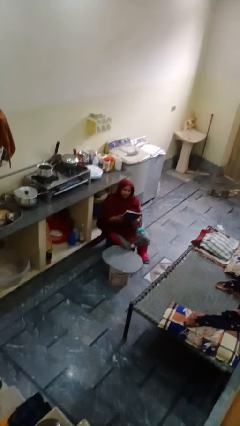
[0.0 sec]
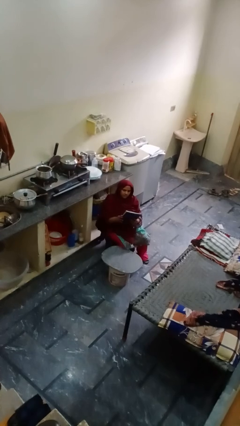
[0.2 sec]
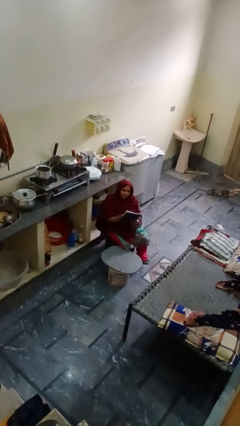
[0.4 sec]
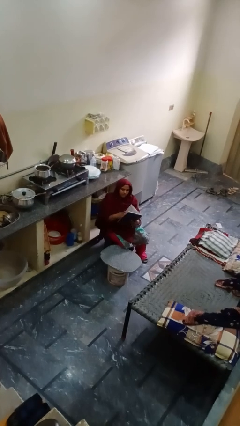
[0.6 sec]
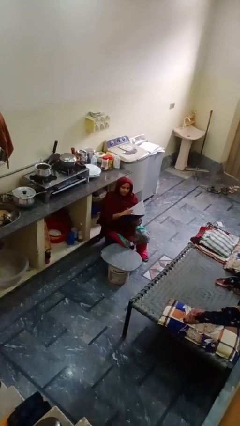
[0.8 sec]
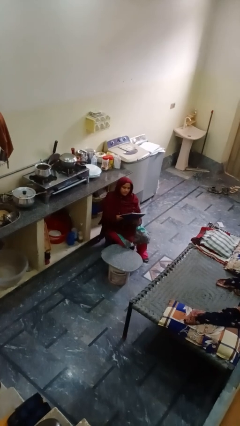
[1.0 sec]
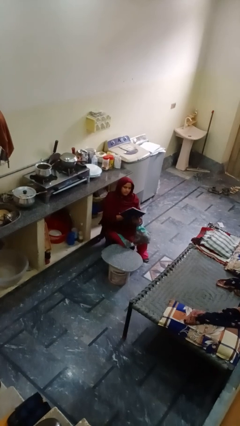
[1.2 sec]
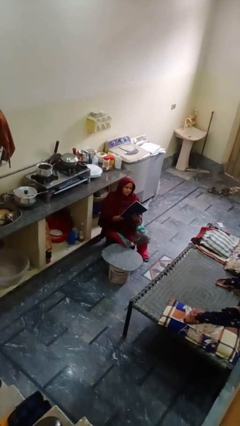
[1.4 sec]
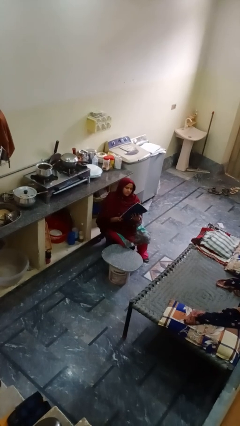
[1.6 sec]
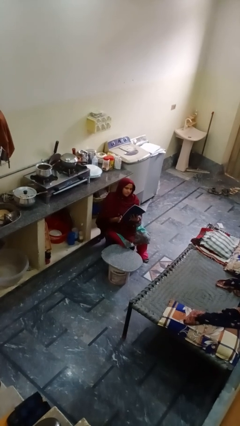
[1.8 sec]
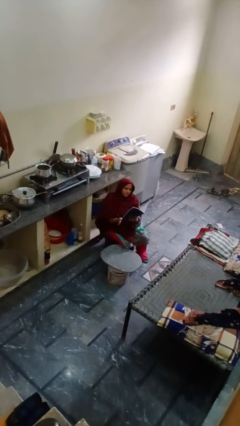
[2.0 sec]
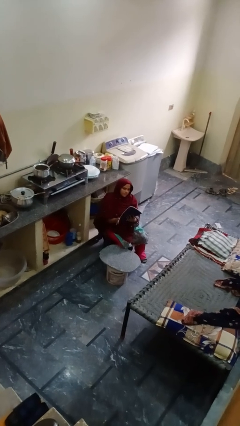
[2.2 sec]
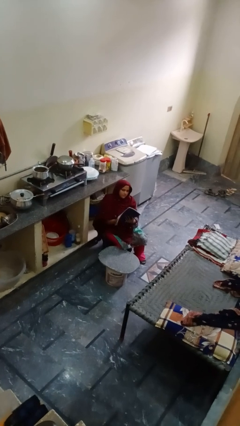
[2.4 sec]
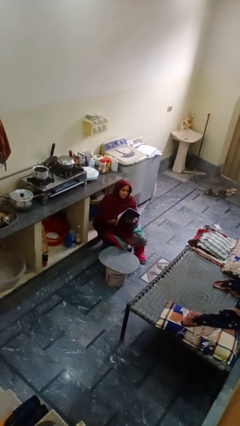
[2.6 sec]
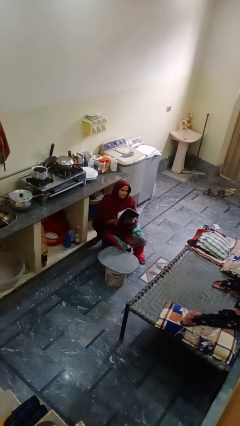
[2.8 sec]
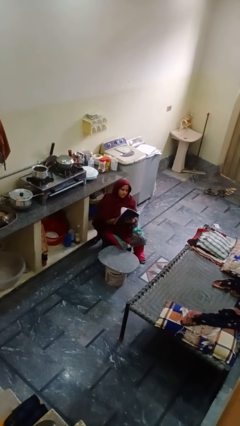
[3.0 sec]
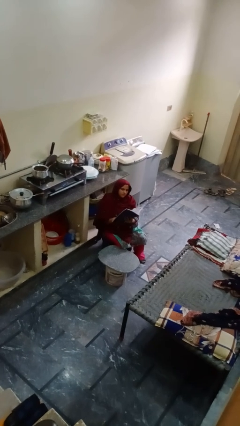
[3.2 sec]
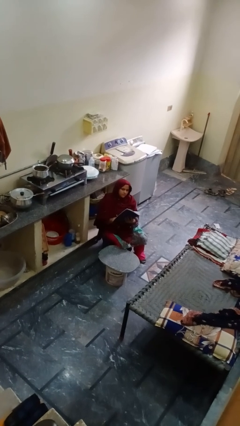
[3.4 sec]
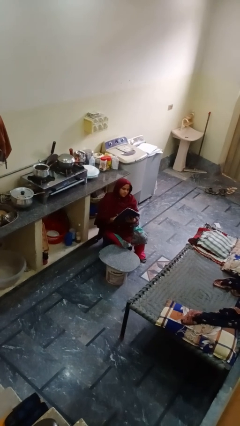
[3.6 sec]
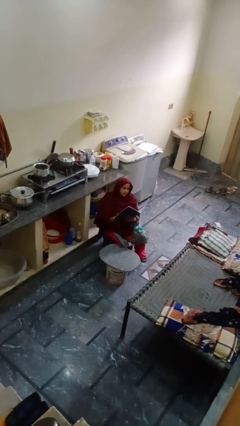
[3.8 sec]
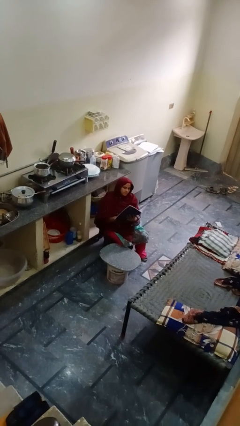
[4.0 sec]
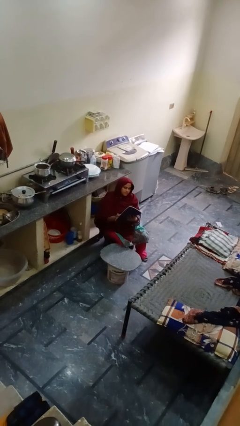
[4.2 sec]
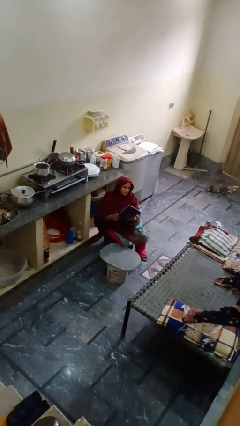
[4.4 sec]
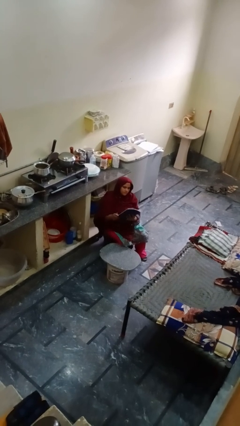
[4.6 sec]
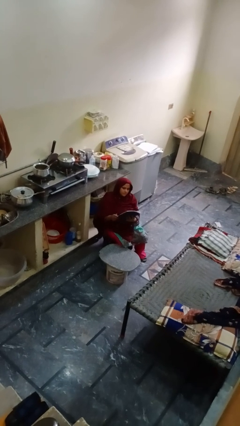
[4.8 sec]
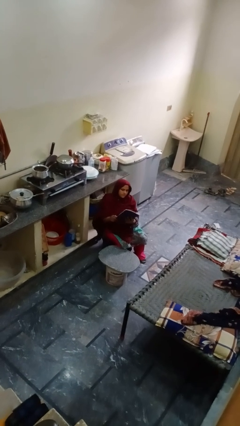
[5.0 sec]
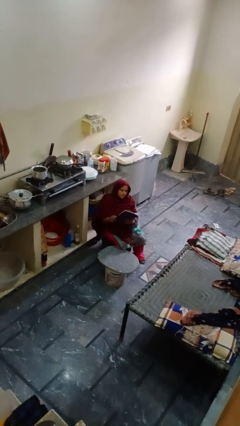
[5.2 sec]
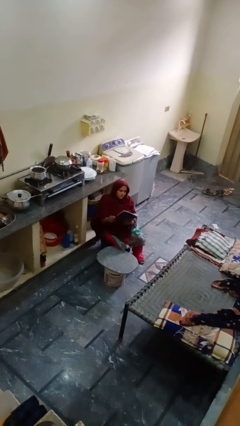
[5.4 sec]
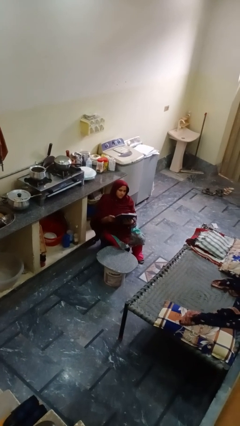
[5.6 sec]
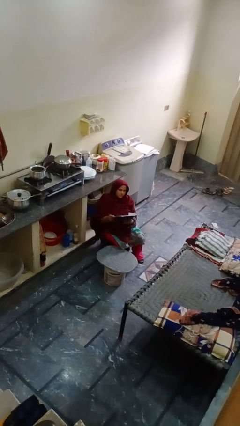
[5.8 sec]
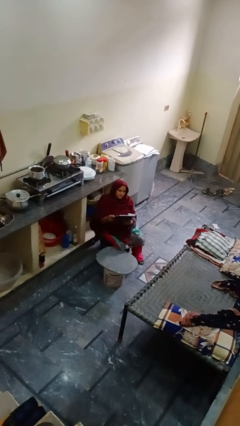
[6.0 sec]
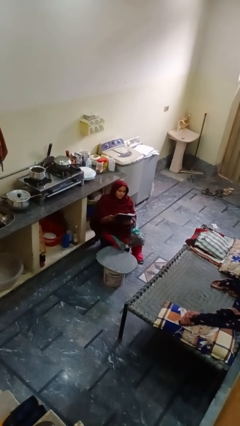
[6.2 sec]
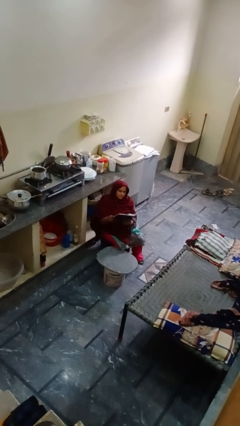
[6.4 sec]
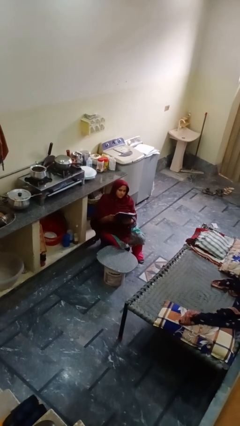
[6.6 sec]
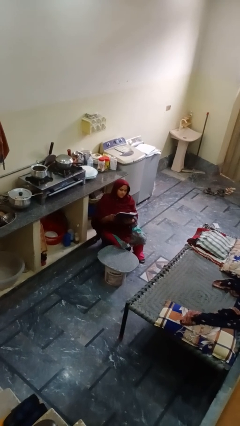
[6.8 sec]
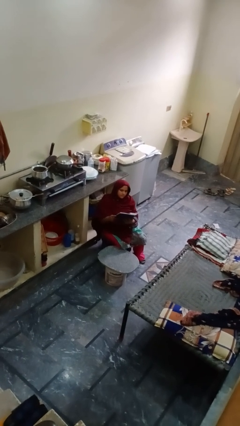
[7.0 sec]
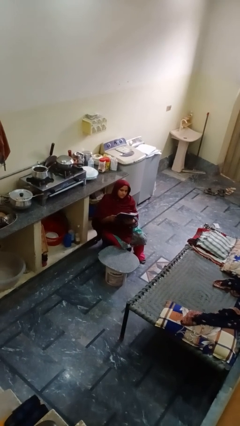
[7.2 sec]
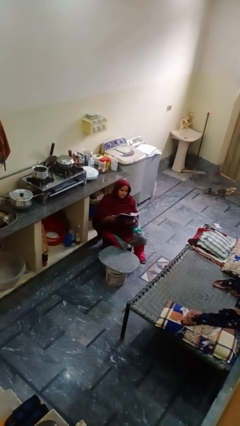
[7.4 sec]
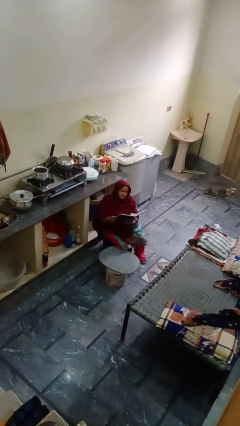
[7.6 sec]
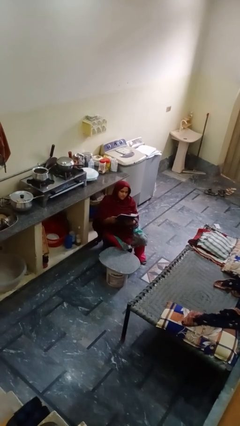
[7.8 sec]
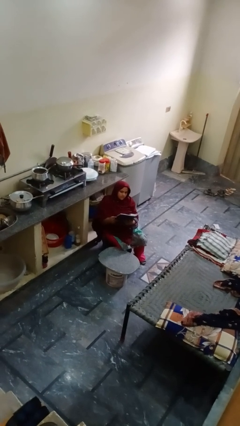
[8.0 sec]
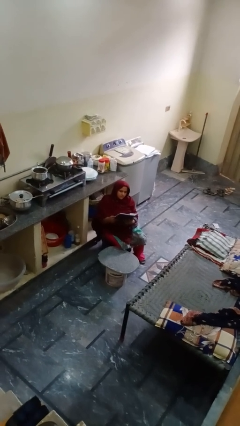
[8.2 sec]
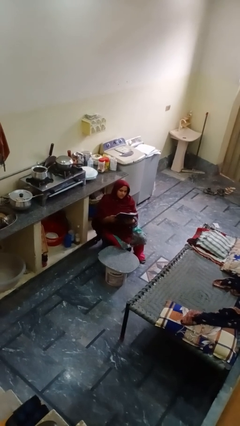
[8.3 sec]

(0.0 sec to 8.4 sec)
person reads magazine

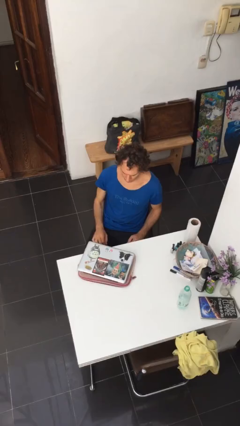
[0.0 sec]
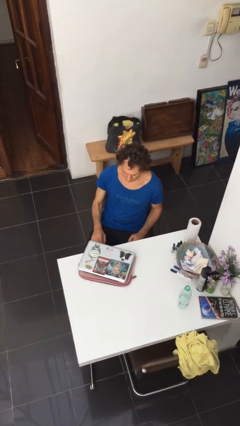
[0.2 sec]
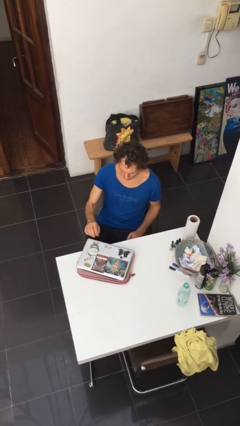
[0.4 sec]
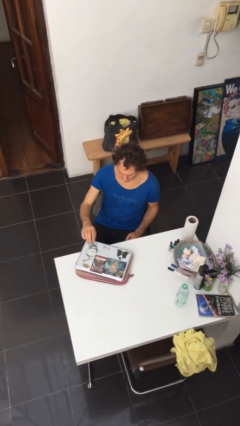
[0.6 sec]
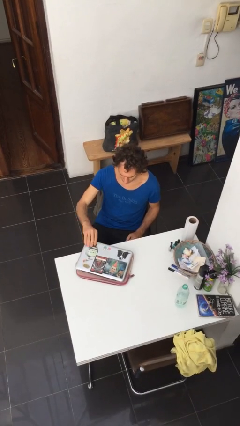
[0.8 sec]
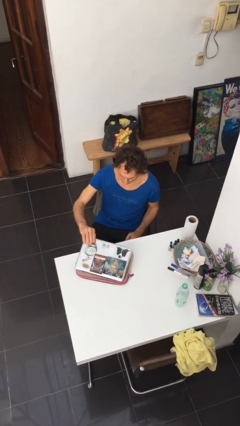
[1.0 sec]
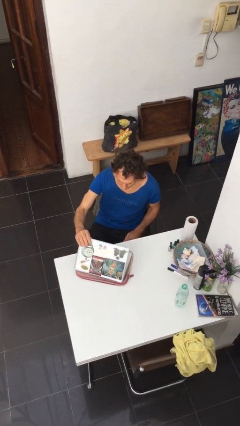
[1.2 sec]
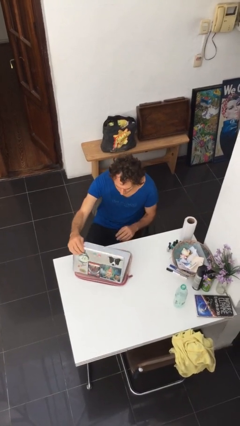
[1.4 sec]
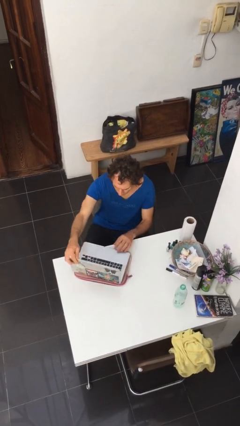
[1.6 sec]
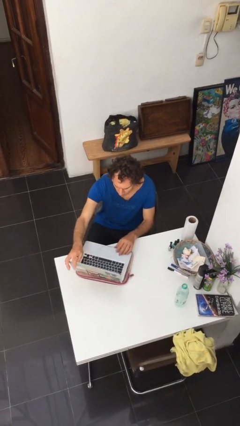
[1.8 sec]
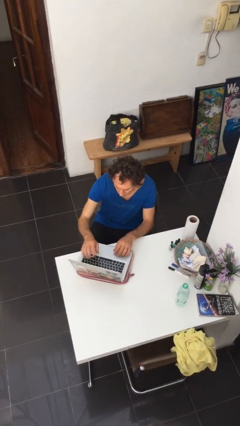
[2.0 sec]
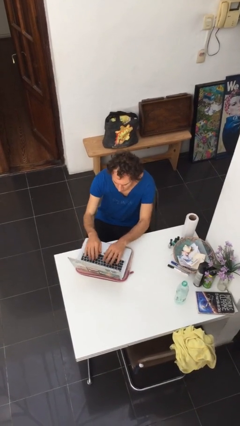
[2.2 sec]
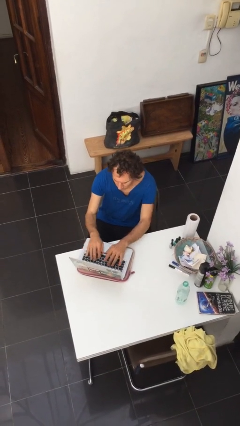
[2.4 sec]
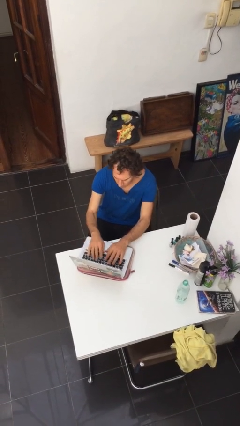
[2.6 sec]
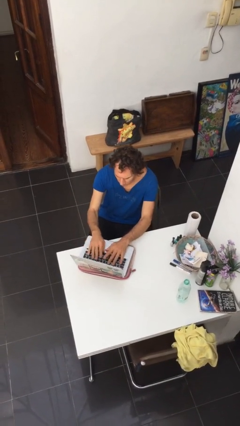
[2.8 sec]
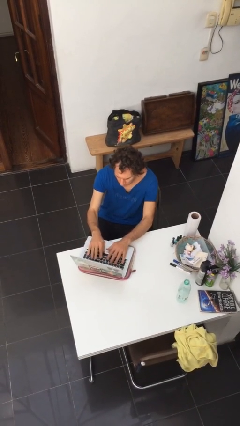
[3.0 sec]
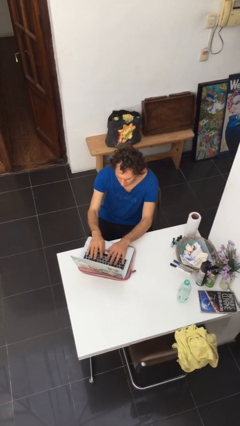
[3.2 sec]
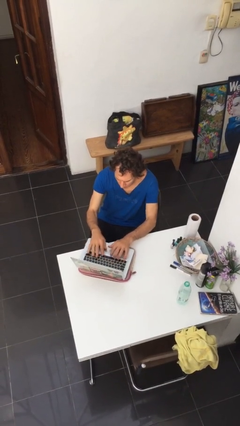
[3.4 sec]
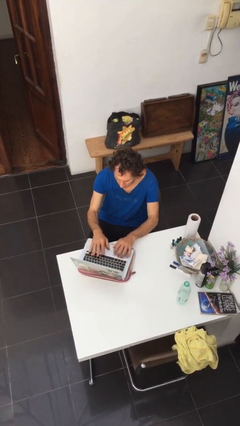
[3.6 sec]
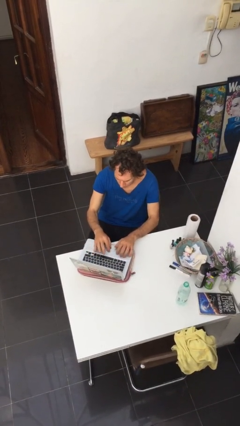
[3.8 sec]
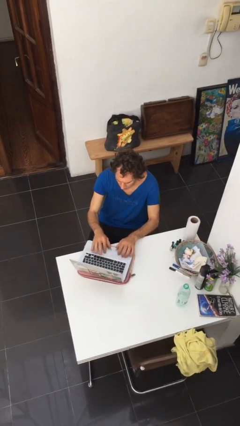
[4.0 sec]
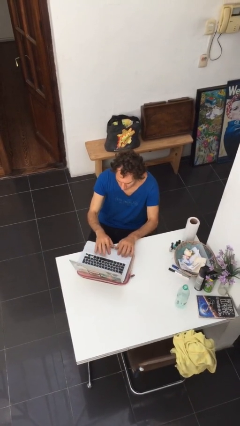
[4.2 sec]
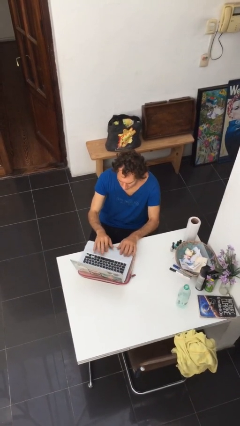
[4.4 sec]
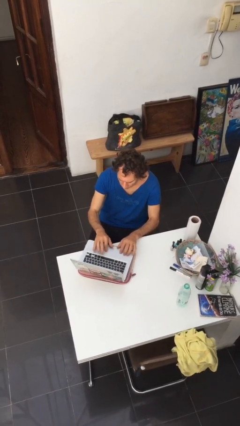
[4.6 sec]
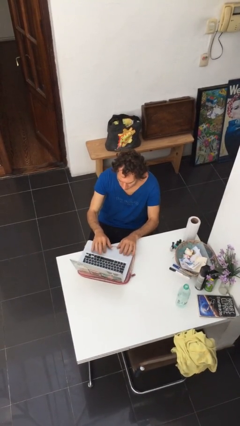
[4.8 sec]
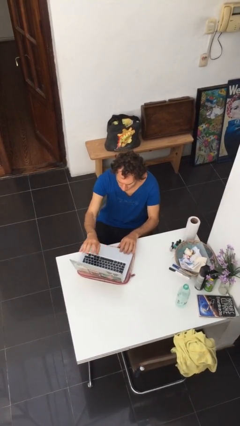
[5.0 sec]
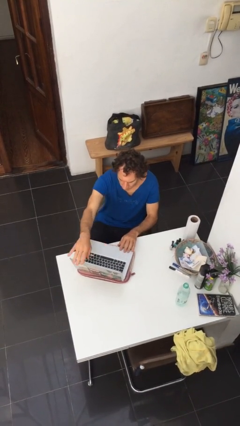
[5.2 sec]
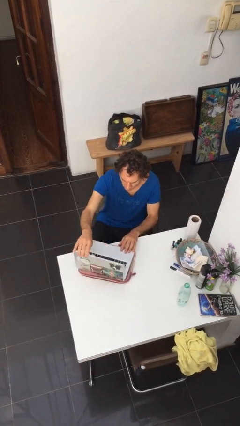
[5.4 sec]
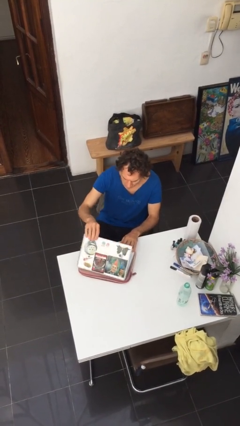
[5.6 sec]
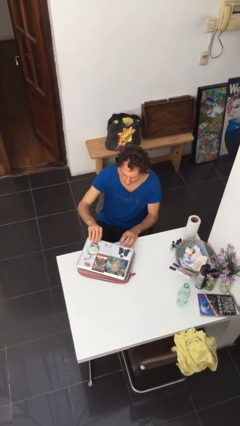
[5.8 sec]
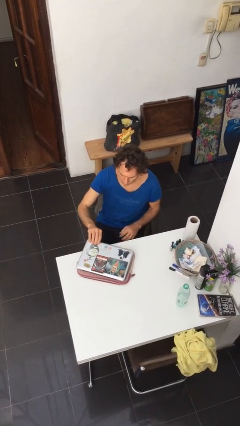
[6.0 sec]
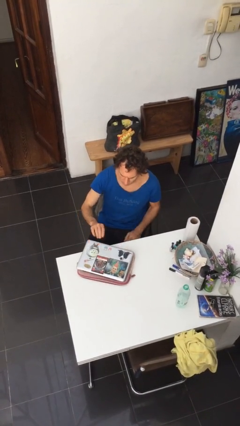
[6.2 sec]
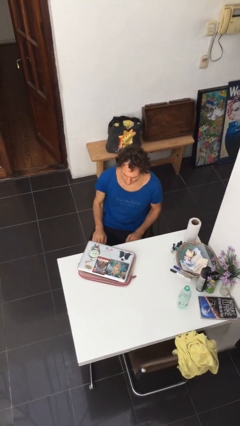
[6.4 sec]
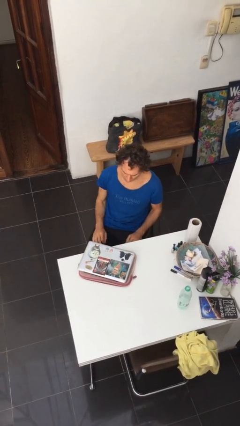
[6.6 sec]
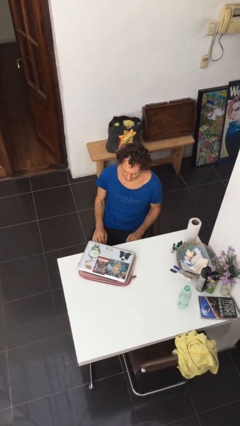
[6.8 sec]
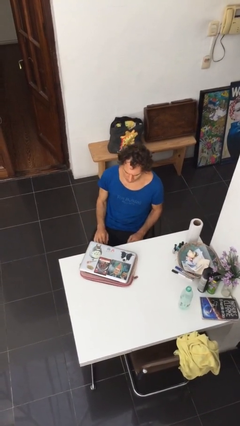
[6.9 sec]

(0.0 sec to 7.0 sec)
person interacts with laptop

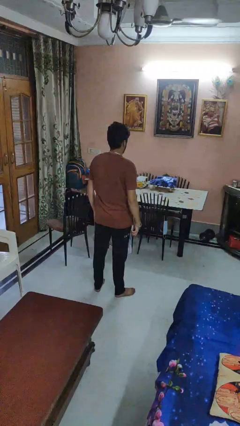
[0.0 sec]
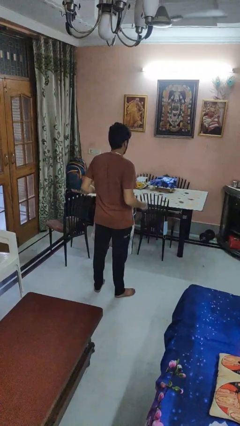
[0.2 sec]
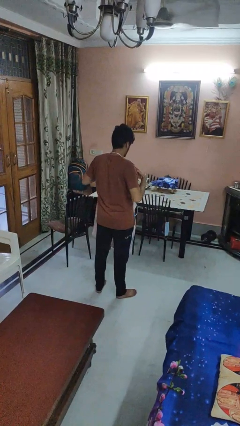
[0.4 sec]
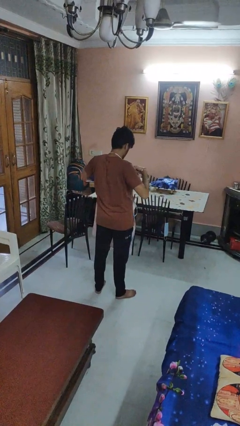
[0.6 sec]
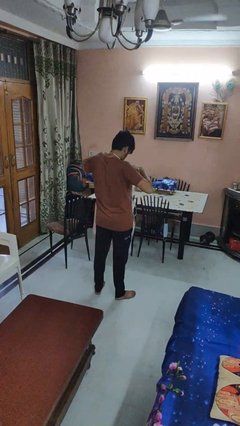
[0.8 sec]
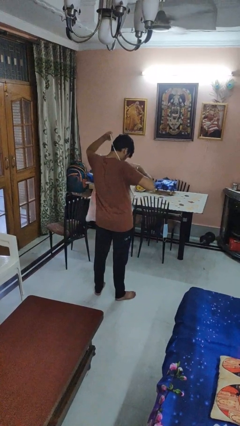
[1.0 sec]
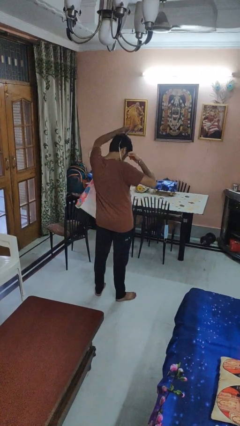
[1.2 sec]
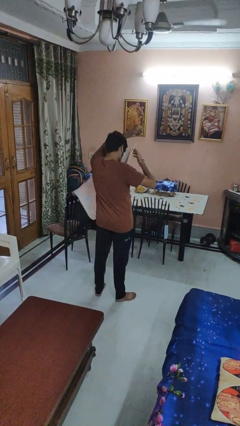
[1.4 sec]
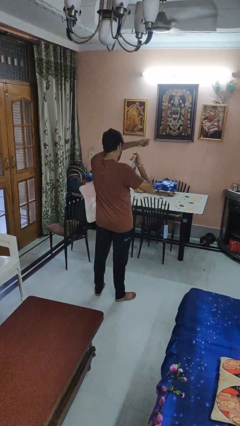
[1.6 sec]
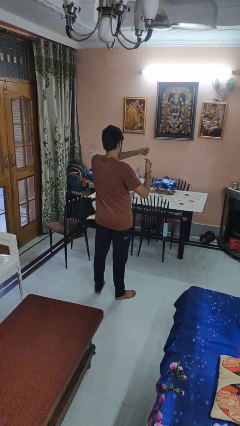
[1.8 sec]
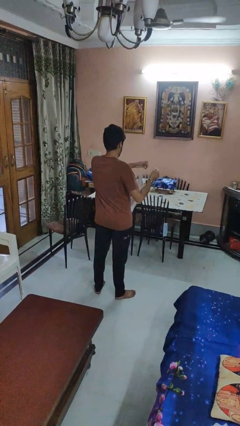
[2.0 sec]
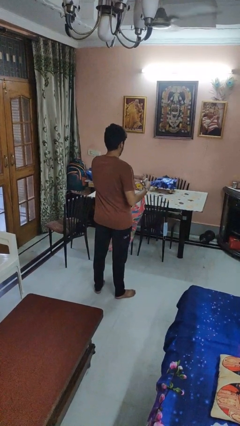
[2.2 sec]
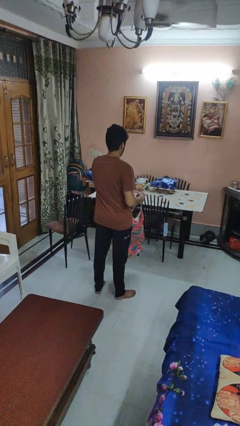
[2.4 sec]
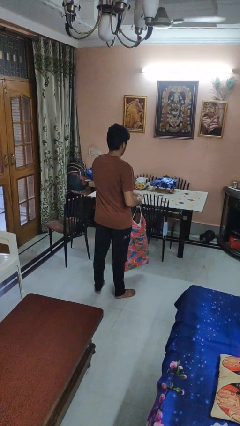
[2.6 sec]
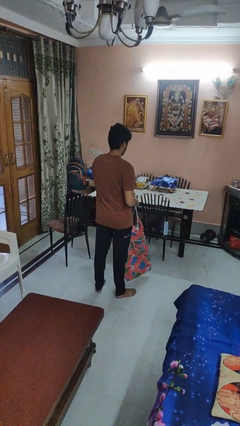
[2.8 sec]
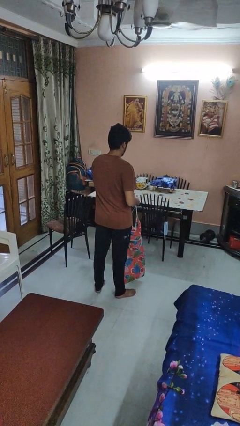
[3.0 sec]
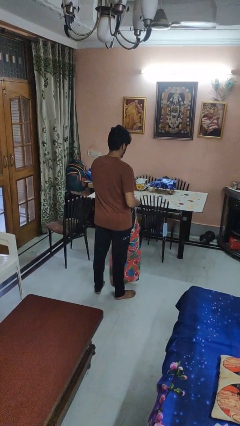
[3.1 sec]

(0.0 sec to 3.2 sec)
person takes off apron
